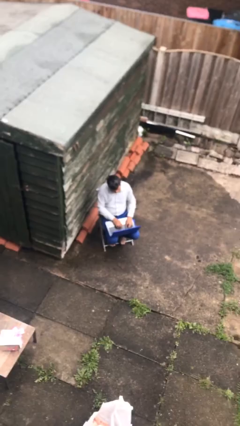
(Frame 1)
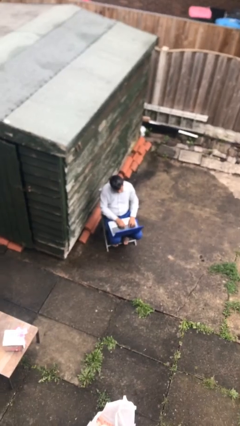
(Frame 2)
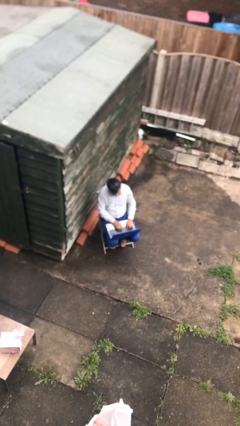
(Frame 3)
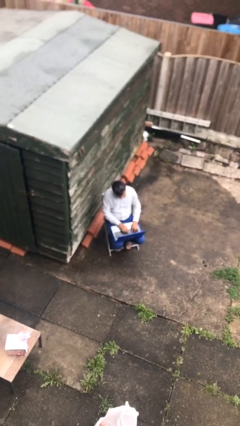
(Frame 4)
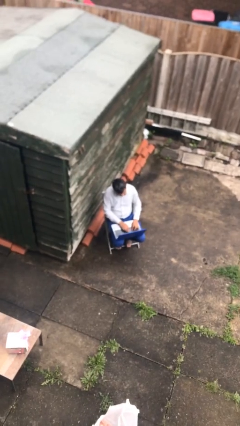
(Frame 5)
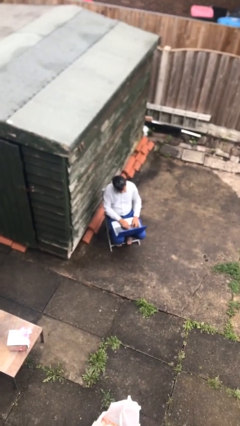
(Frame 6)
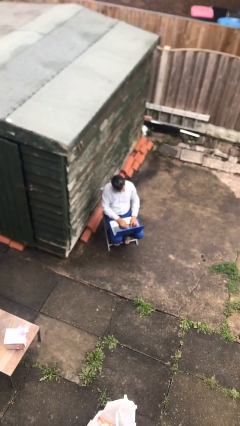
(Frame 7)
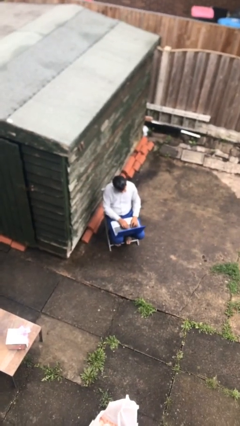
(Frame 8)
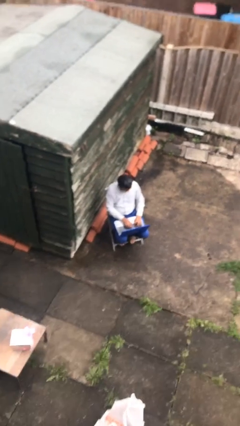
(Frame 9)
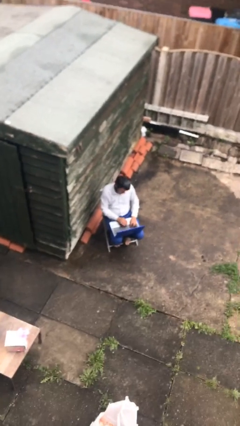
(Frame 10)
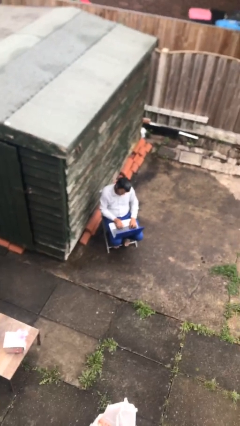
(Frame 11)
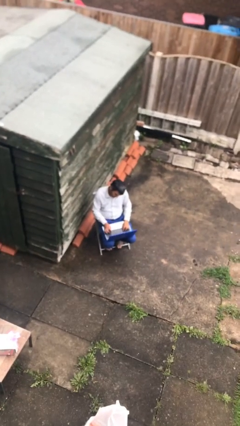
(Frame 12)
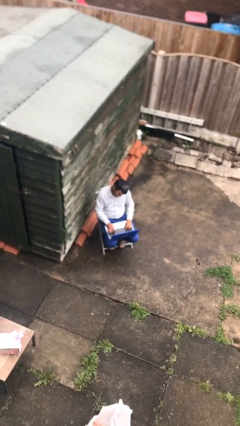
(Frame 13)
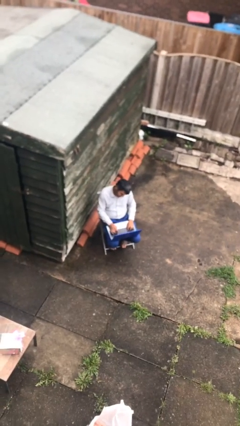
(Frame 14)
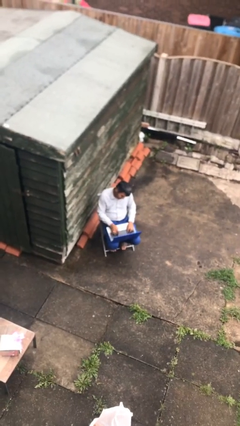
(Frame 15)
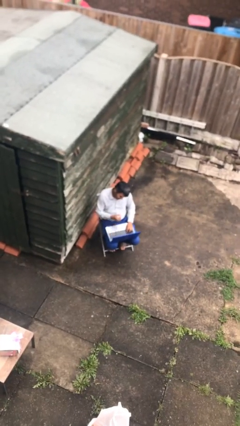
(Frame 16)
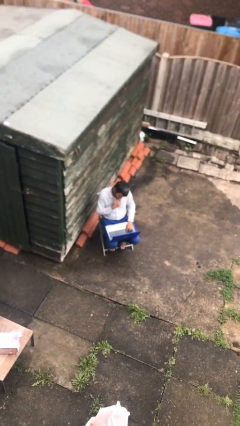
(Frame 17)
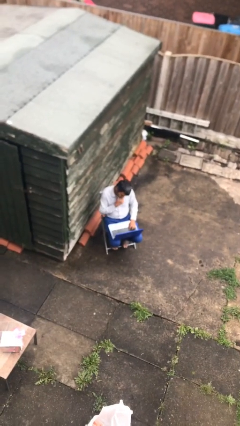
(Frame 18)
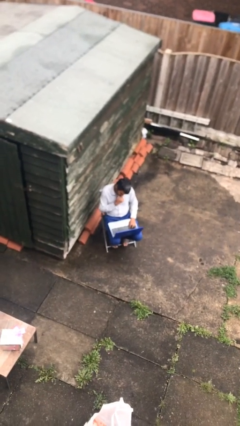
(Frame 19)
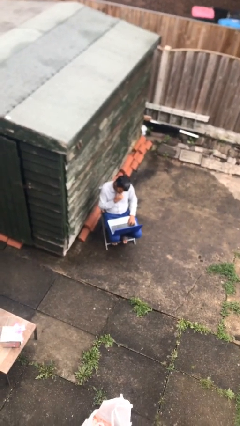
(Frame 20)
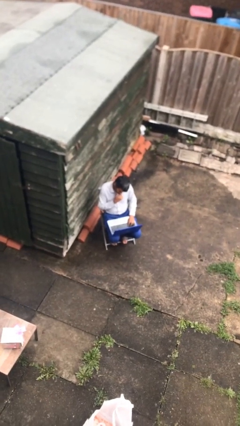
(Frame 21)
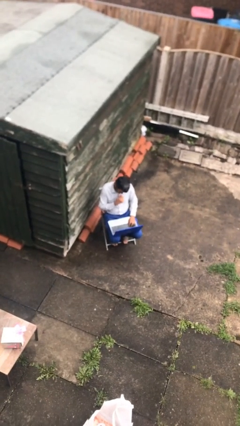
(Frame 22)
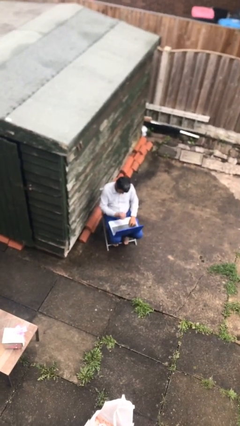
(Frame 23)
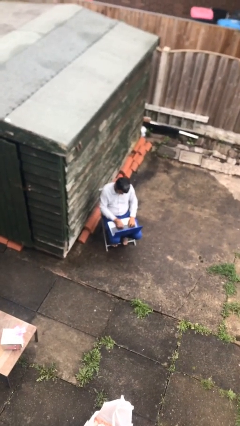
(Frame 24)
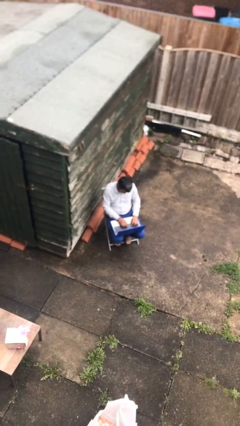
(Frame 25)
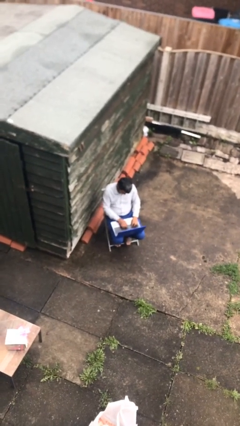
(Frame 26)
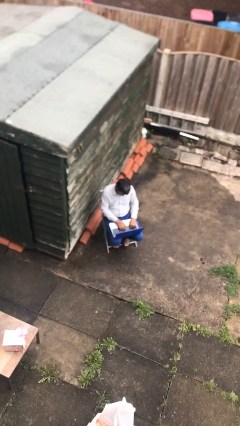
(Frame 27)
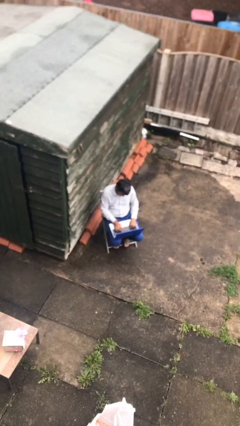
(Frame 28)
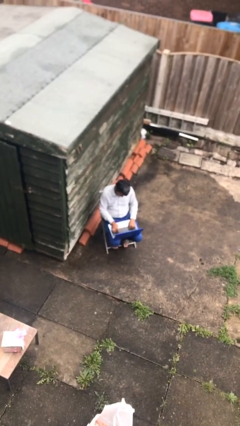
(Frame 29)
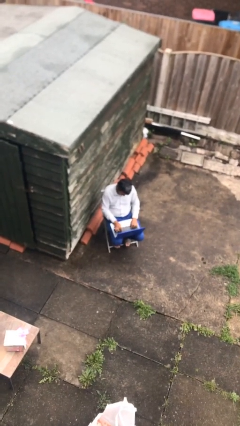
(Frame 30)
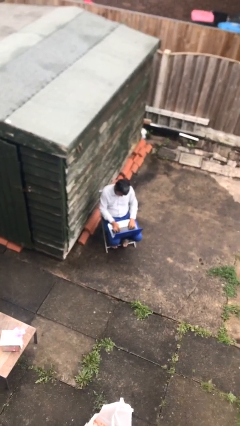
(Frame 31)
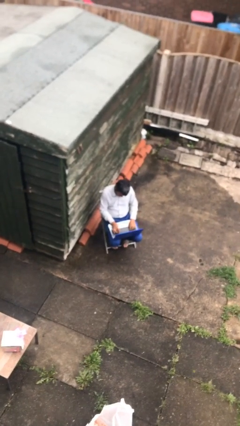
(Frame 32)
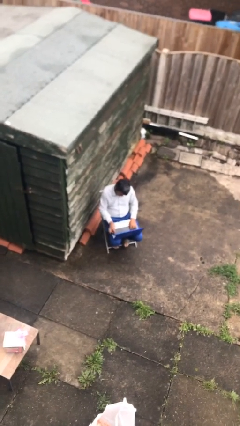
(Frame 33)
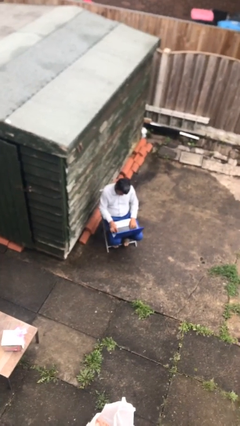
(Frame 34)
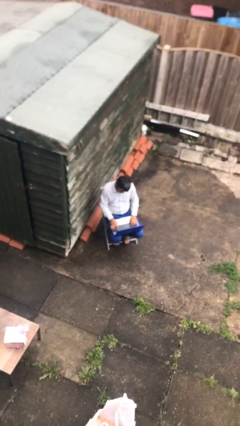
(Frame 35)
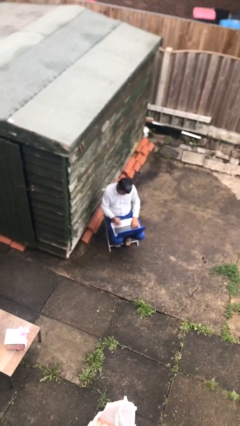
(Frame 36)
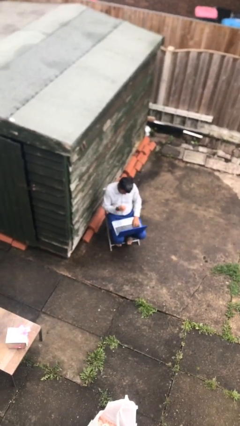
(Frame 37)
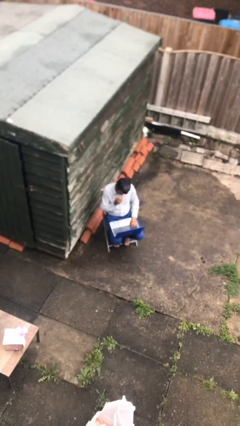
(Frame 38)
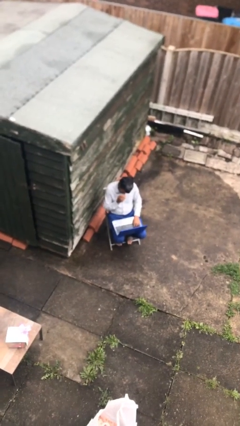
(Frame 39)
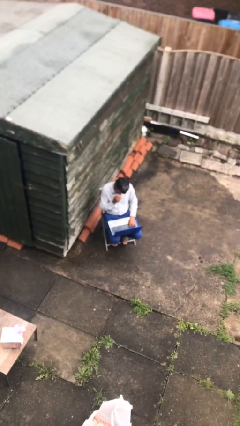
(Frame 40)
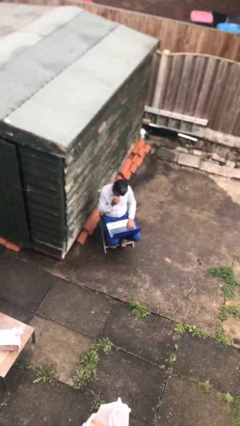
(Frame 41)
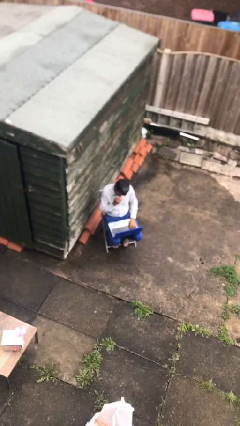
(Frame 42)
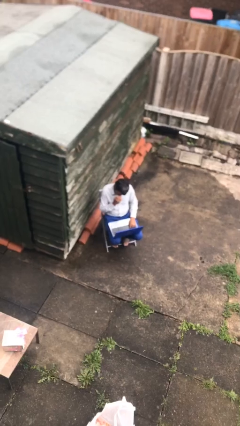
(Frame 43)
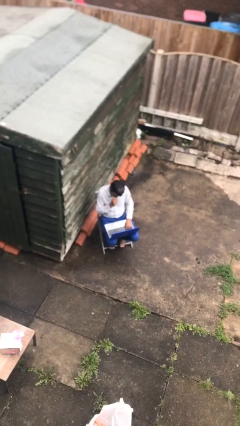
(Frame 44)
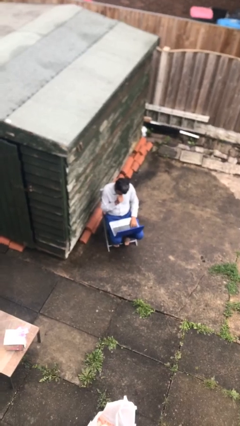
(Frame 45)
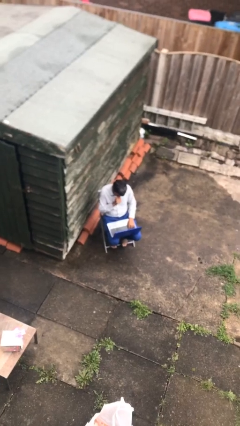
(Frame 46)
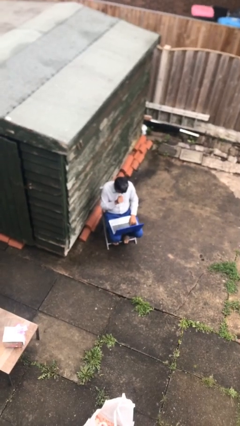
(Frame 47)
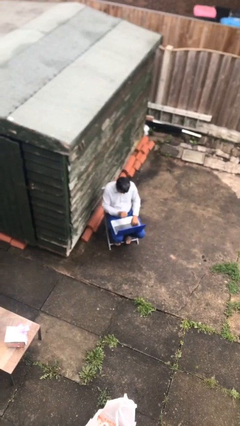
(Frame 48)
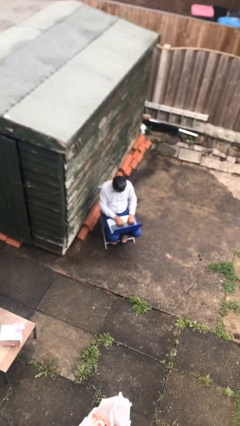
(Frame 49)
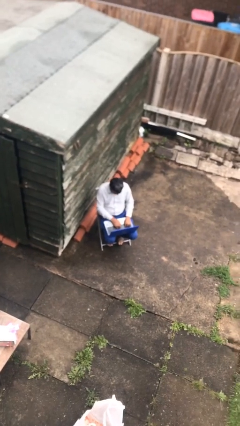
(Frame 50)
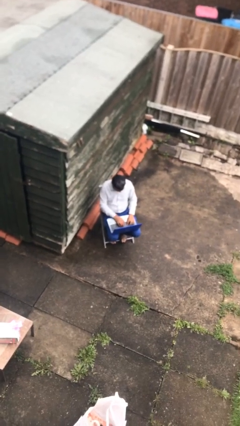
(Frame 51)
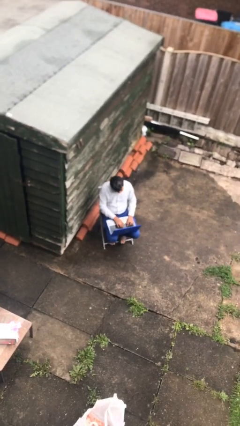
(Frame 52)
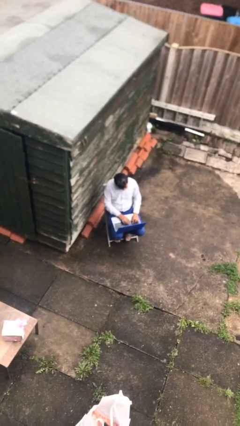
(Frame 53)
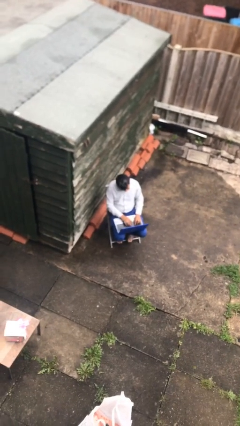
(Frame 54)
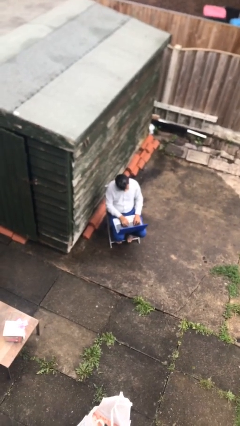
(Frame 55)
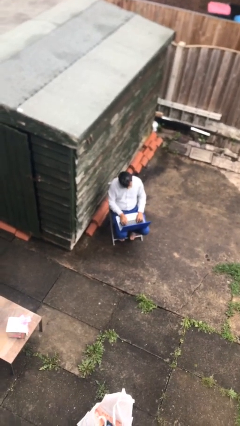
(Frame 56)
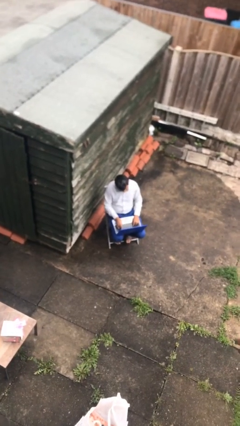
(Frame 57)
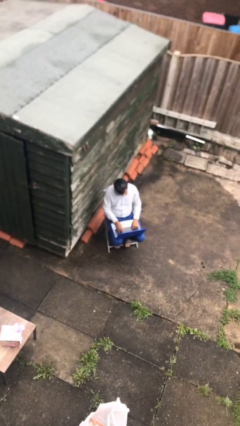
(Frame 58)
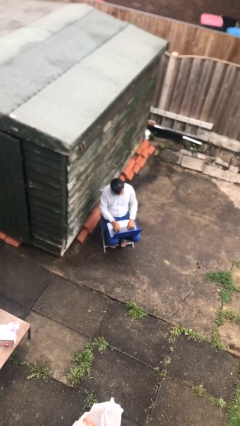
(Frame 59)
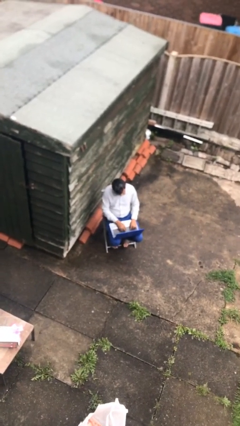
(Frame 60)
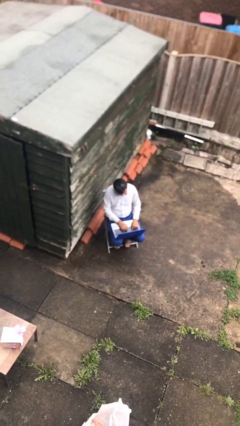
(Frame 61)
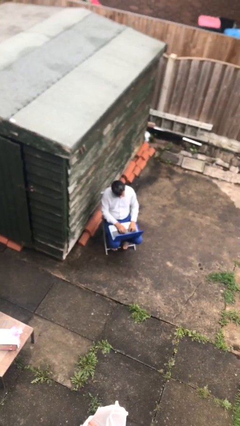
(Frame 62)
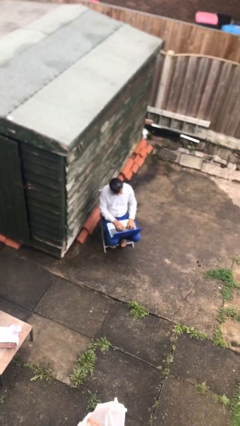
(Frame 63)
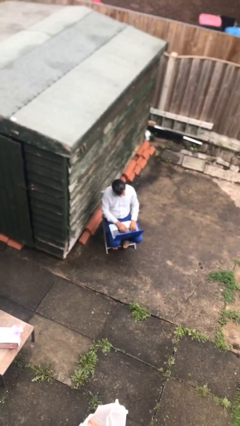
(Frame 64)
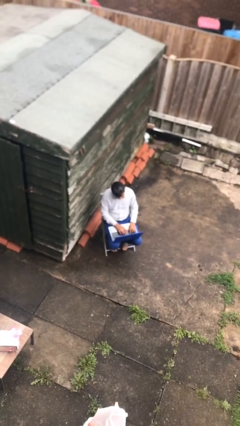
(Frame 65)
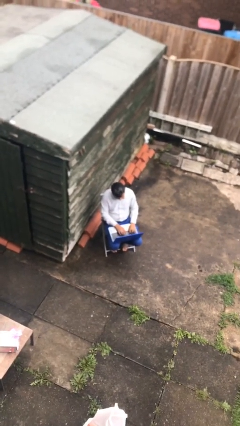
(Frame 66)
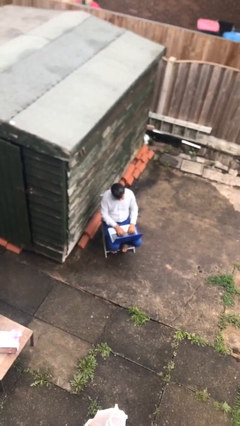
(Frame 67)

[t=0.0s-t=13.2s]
person interacts with laptop

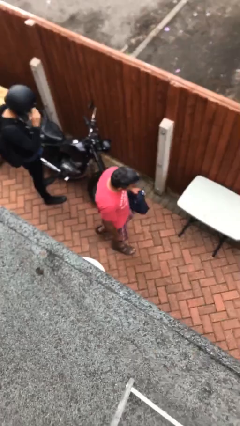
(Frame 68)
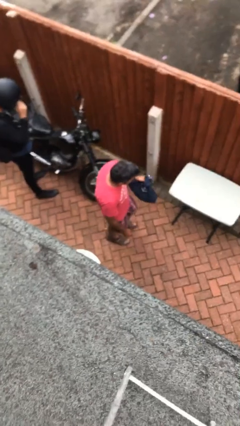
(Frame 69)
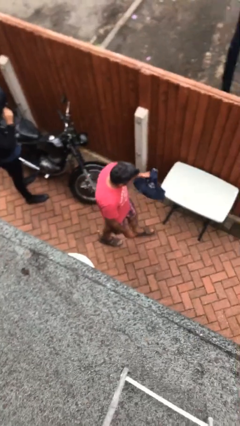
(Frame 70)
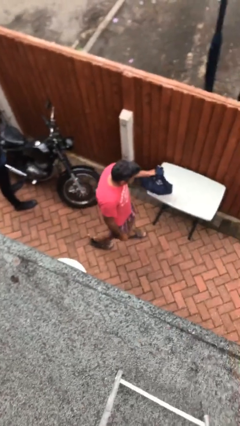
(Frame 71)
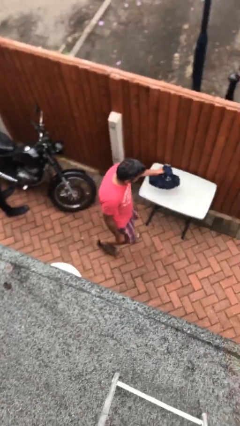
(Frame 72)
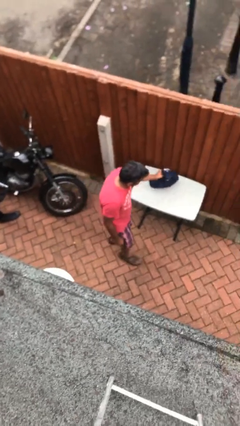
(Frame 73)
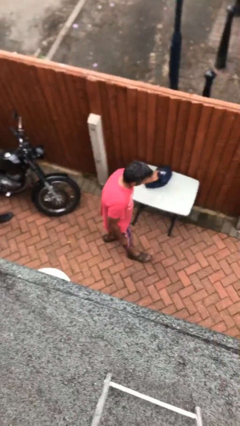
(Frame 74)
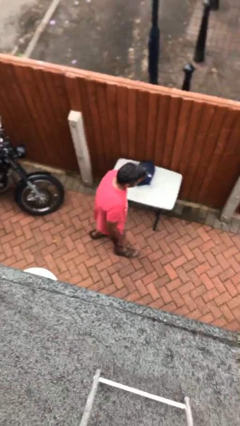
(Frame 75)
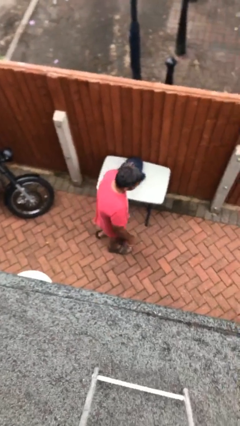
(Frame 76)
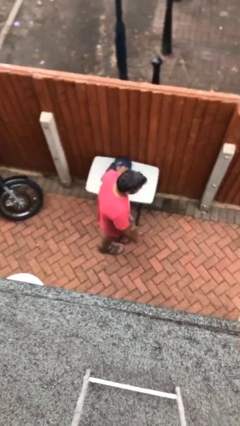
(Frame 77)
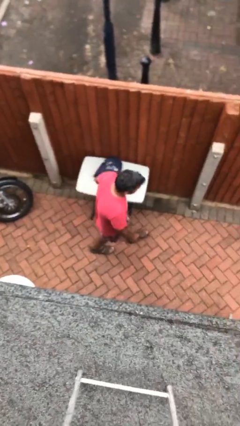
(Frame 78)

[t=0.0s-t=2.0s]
person puts down object on table

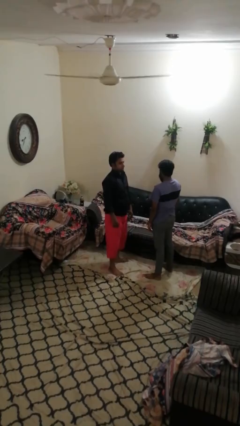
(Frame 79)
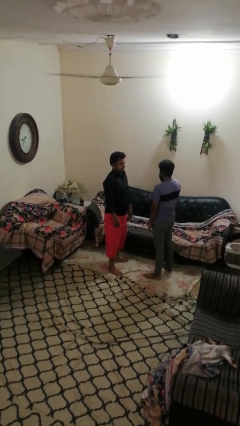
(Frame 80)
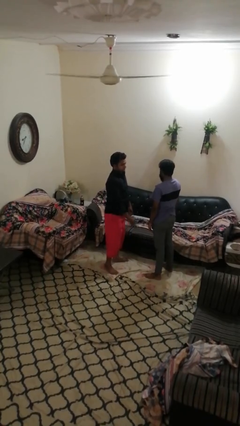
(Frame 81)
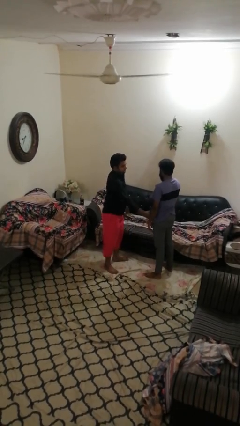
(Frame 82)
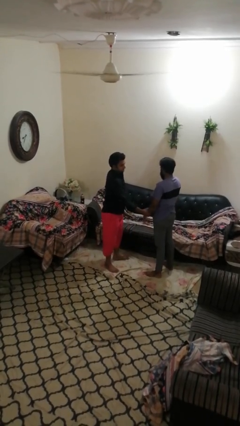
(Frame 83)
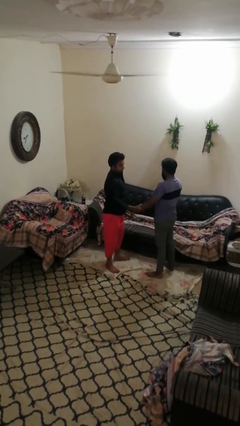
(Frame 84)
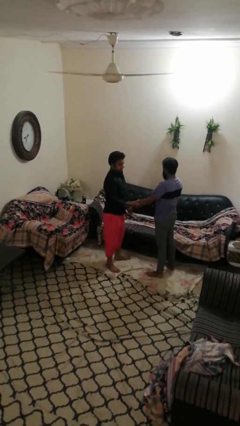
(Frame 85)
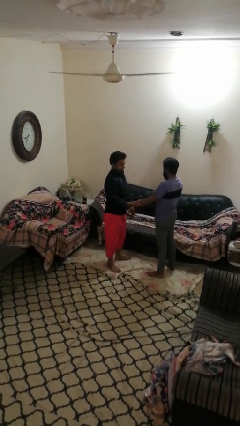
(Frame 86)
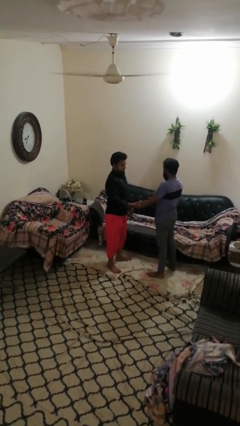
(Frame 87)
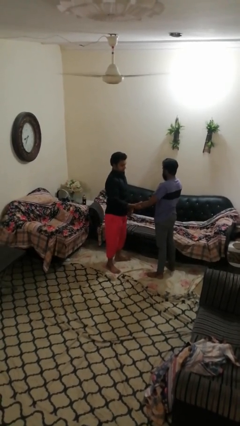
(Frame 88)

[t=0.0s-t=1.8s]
person grabs person by forearm

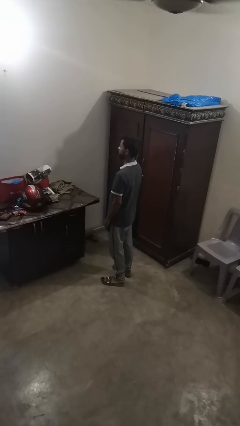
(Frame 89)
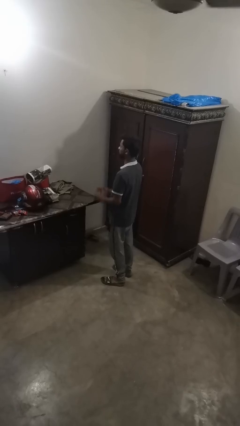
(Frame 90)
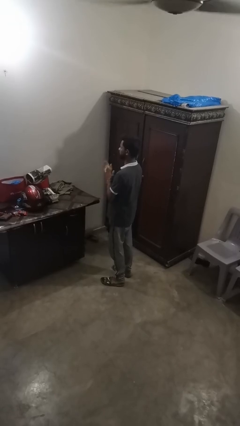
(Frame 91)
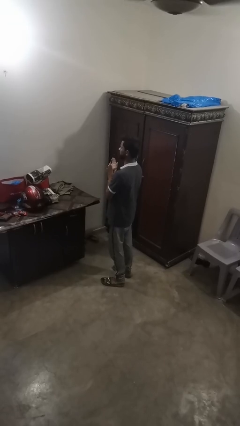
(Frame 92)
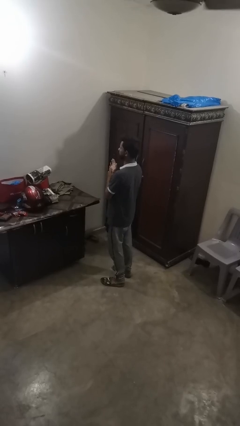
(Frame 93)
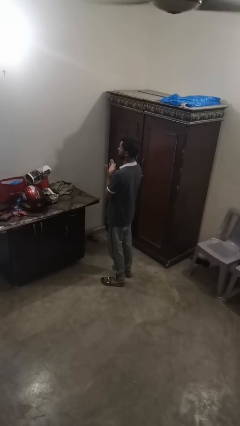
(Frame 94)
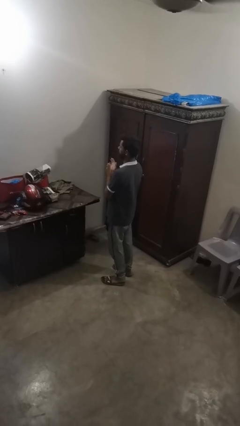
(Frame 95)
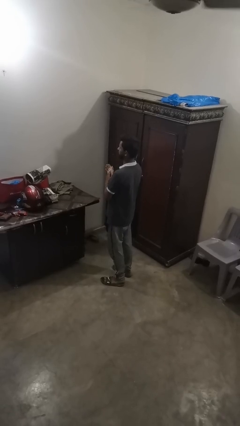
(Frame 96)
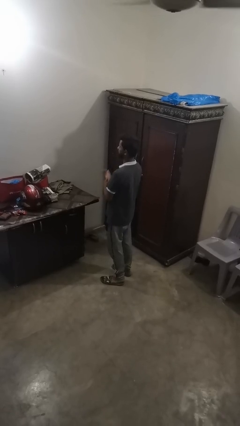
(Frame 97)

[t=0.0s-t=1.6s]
person claps hands
